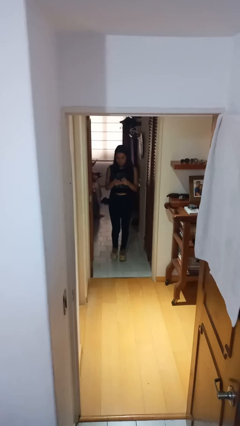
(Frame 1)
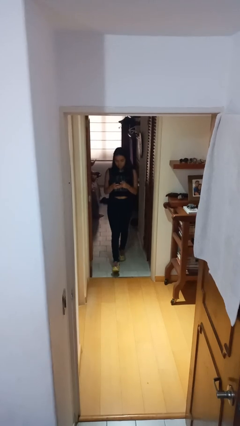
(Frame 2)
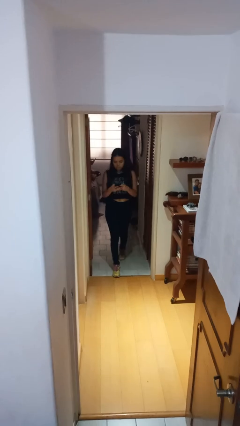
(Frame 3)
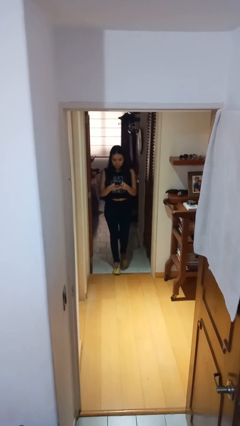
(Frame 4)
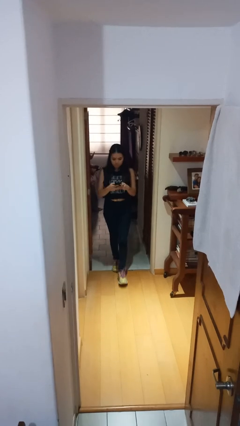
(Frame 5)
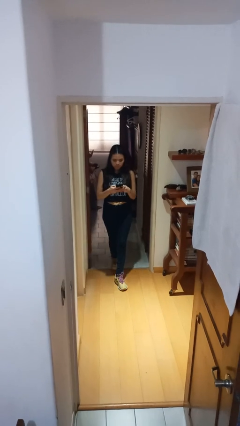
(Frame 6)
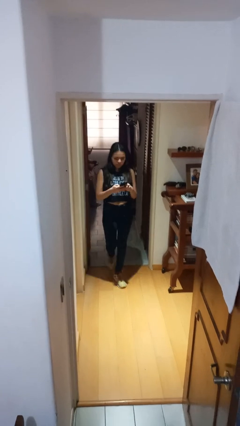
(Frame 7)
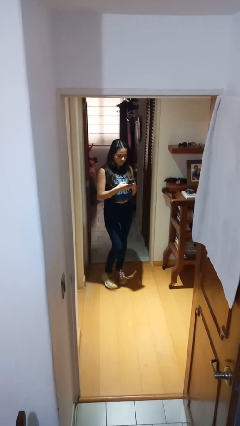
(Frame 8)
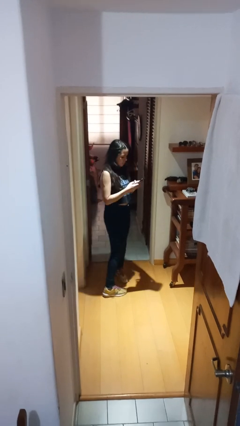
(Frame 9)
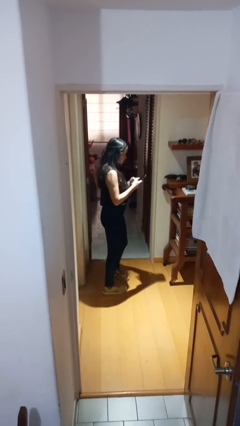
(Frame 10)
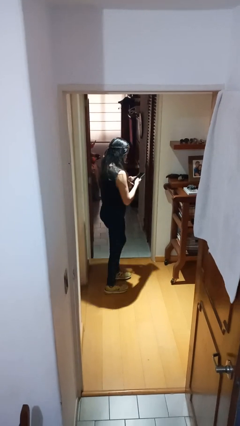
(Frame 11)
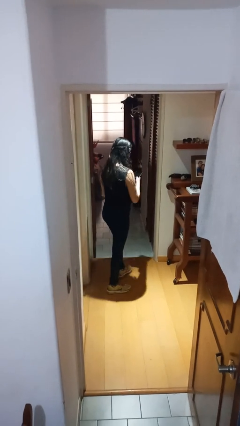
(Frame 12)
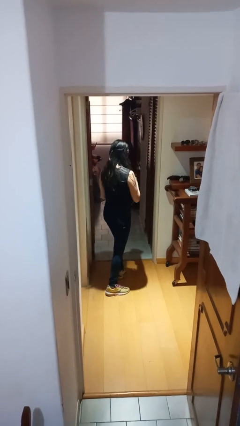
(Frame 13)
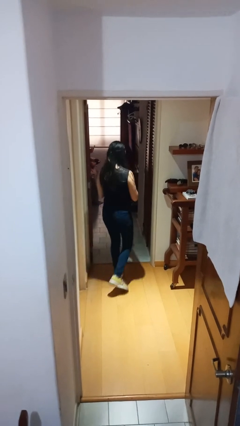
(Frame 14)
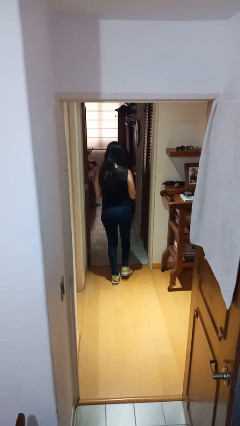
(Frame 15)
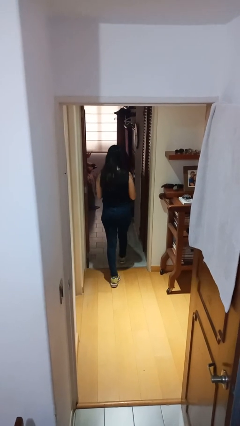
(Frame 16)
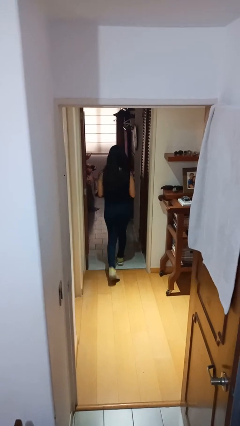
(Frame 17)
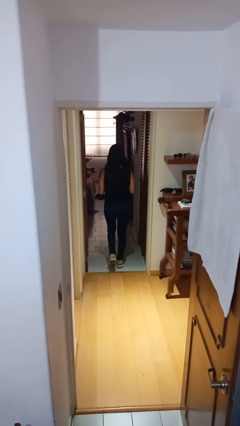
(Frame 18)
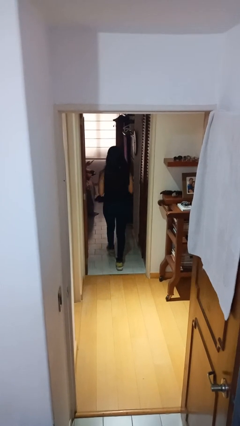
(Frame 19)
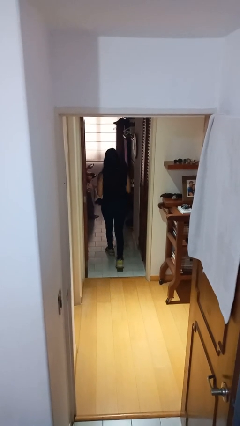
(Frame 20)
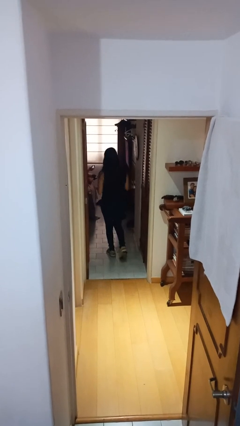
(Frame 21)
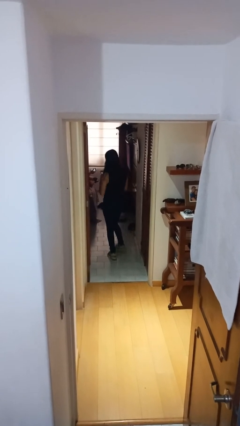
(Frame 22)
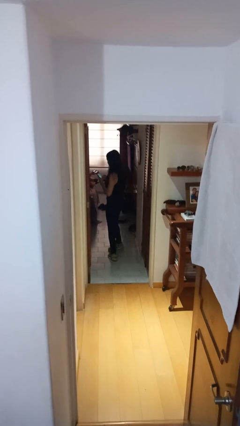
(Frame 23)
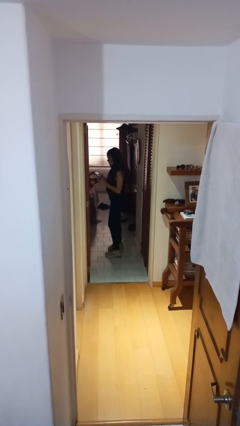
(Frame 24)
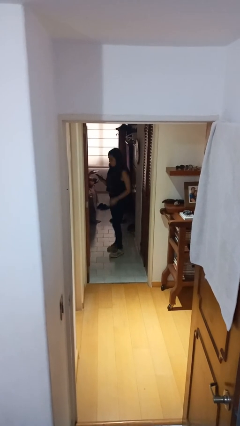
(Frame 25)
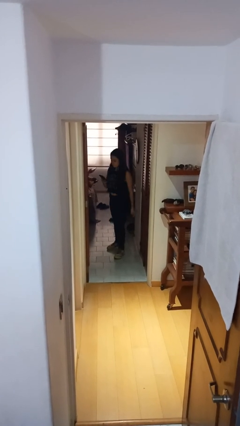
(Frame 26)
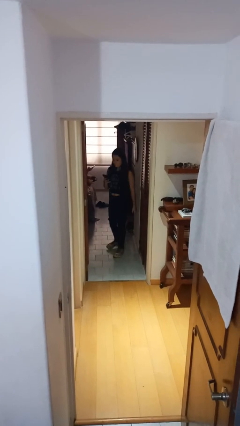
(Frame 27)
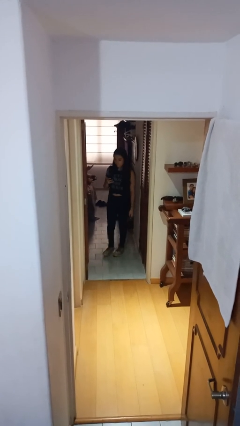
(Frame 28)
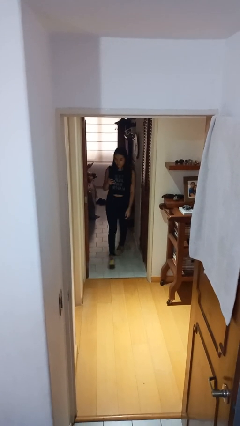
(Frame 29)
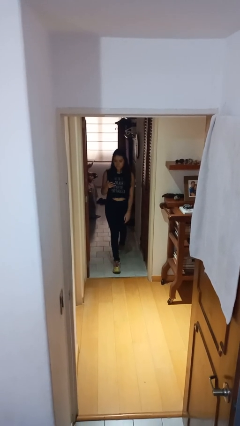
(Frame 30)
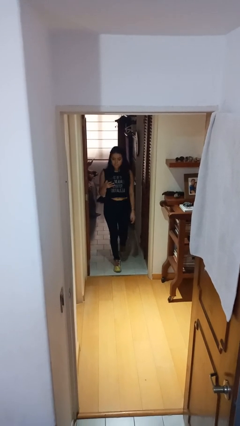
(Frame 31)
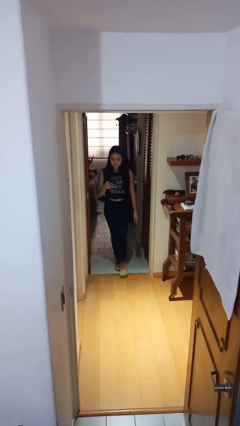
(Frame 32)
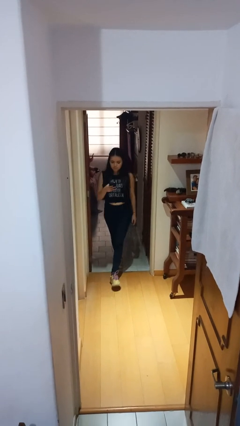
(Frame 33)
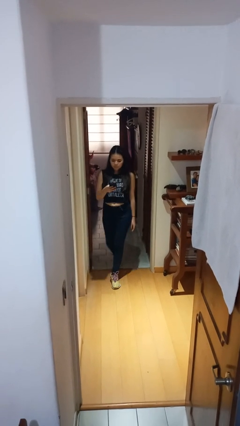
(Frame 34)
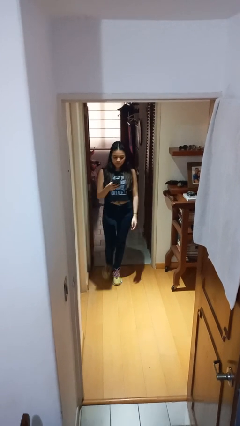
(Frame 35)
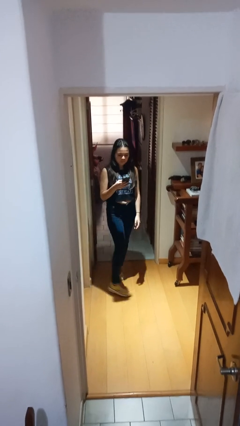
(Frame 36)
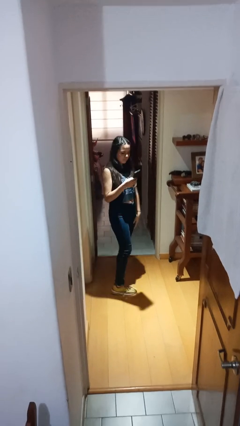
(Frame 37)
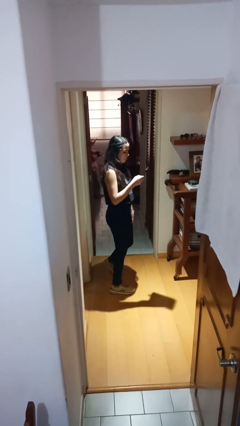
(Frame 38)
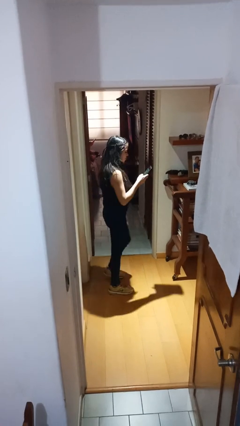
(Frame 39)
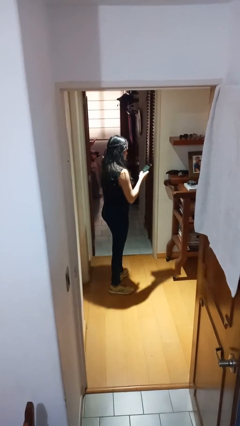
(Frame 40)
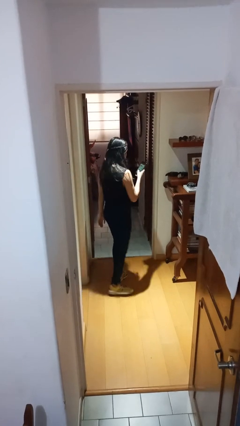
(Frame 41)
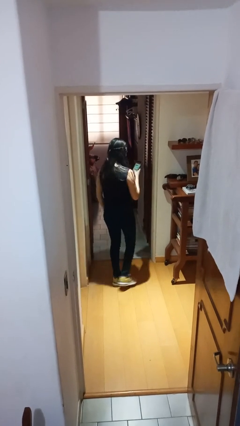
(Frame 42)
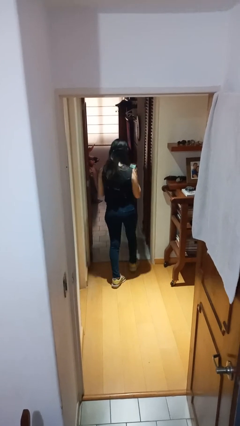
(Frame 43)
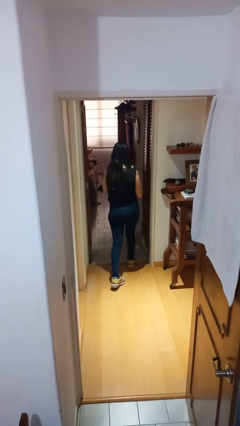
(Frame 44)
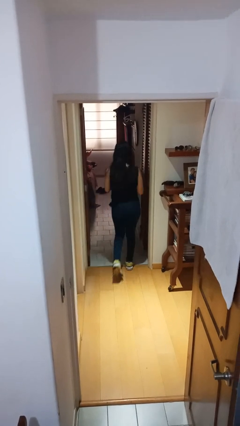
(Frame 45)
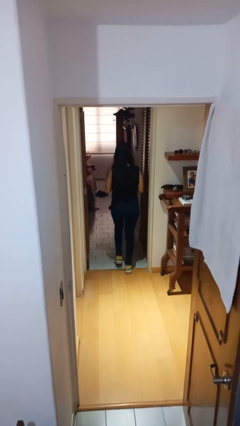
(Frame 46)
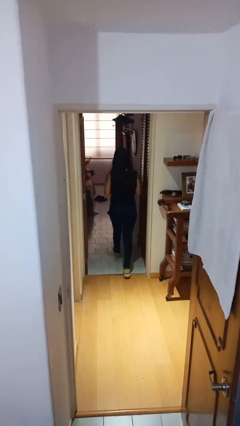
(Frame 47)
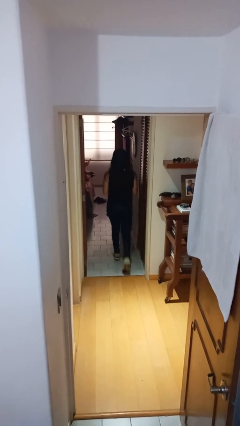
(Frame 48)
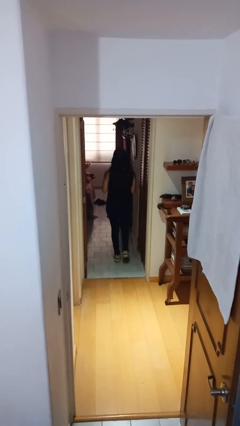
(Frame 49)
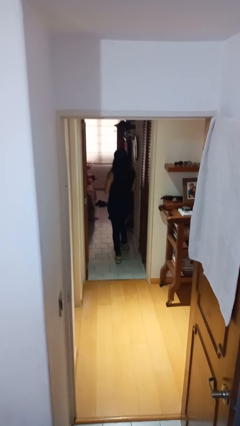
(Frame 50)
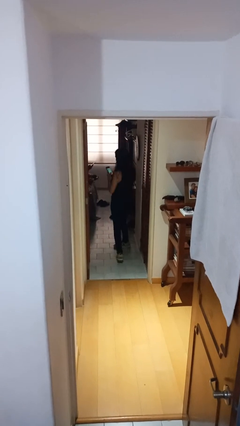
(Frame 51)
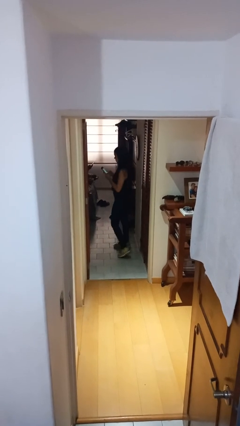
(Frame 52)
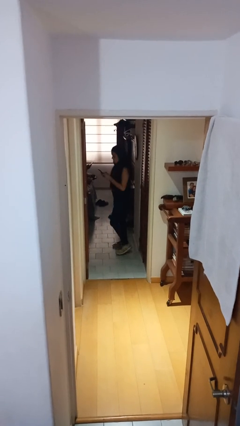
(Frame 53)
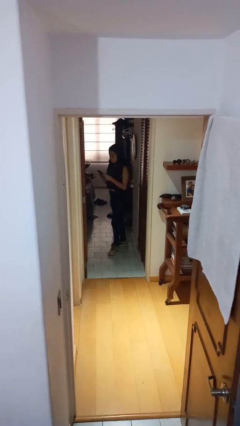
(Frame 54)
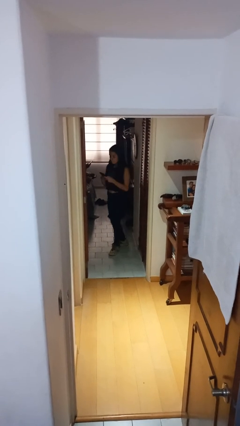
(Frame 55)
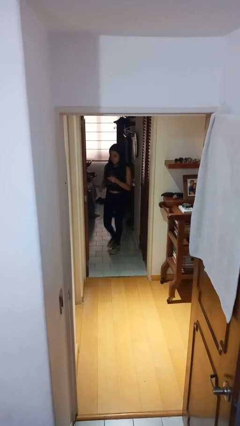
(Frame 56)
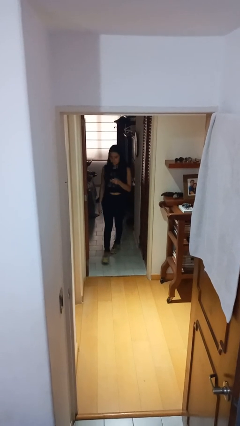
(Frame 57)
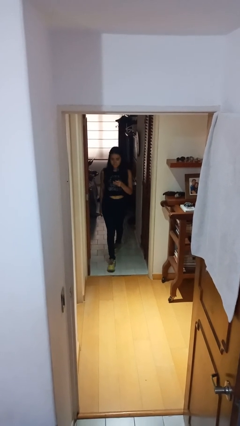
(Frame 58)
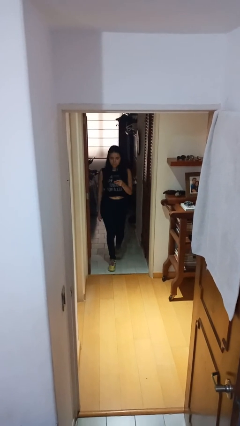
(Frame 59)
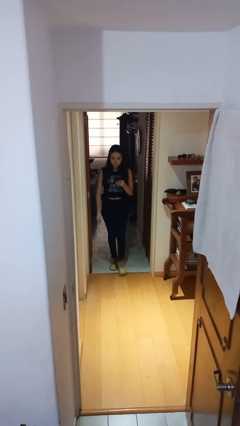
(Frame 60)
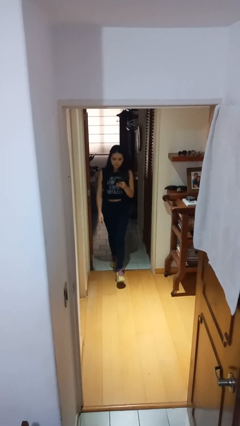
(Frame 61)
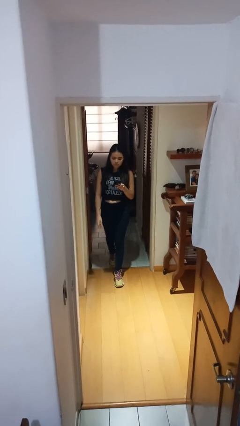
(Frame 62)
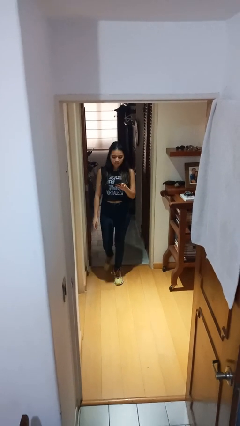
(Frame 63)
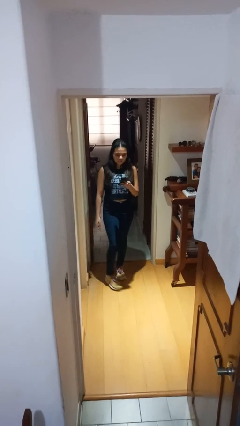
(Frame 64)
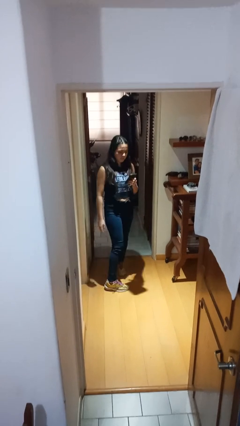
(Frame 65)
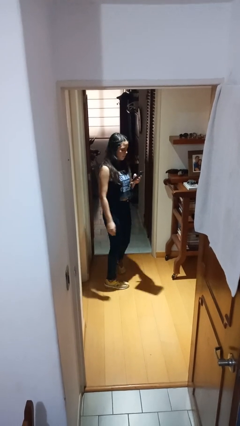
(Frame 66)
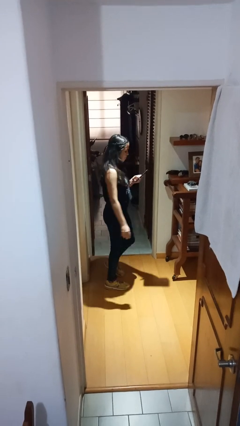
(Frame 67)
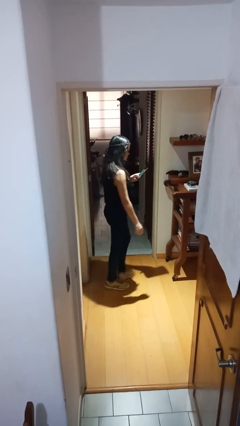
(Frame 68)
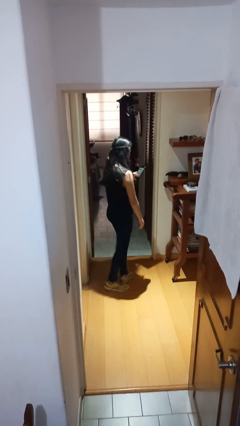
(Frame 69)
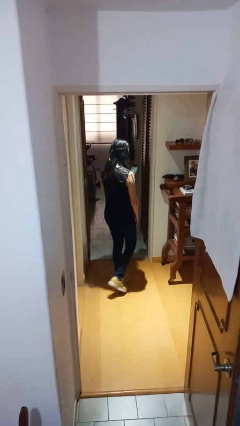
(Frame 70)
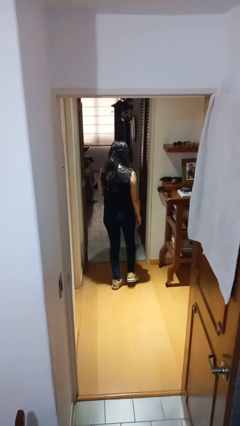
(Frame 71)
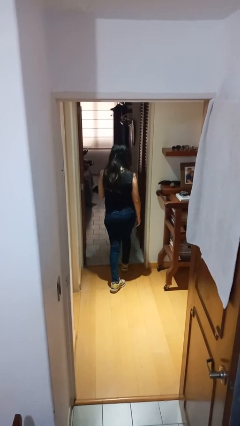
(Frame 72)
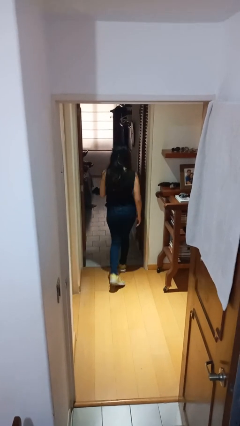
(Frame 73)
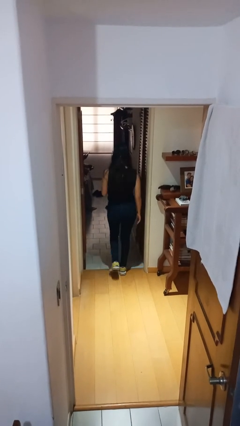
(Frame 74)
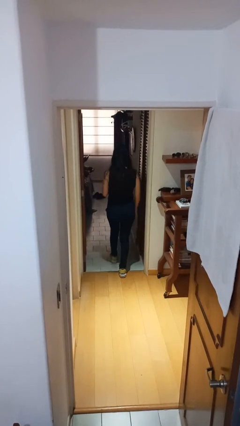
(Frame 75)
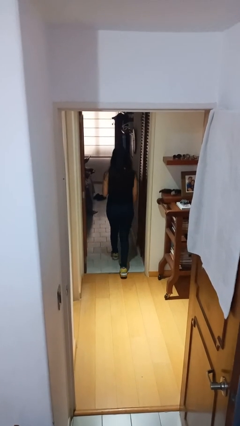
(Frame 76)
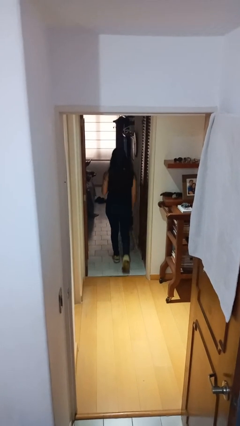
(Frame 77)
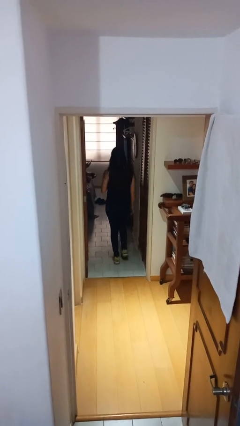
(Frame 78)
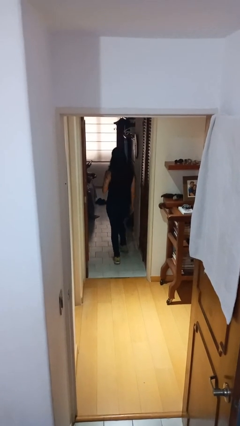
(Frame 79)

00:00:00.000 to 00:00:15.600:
person texts on phone

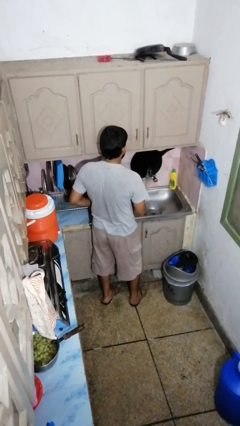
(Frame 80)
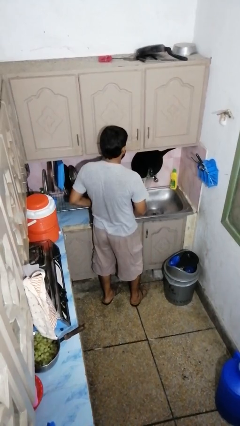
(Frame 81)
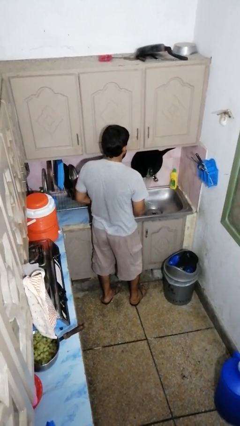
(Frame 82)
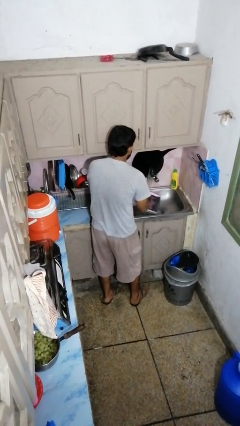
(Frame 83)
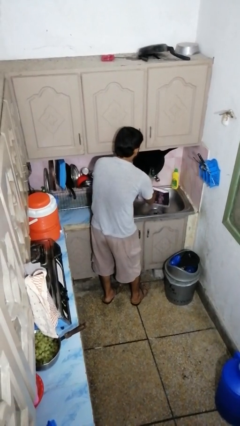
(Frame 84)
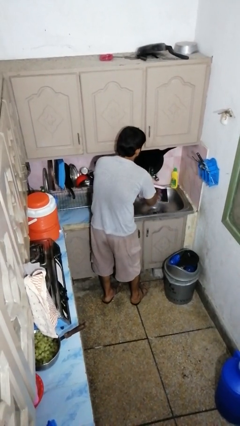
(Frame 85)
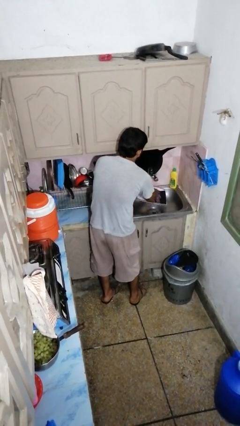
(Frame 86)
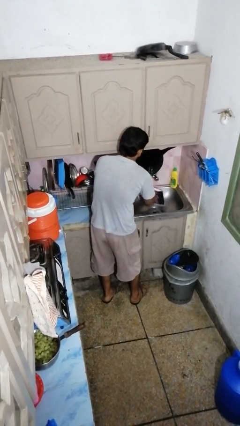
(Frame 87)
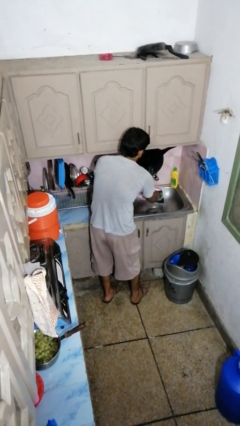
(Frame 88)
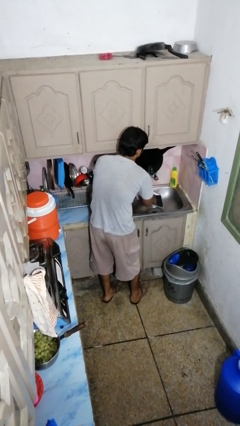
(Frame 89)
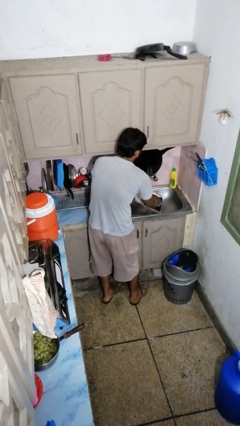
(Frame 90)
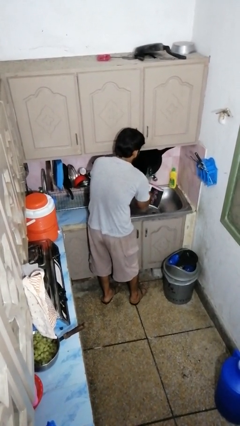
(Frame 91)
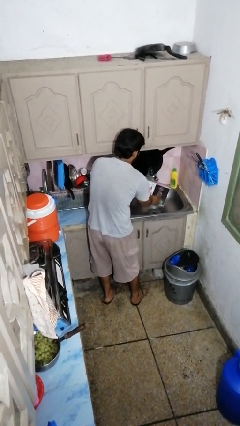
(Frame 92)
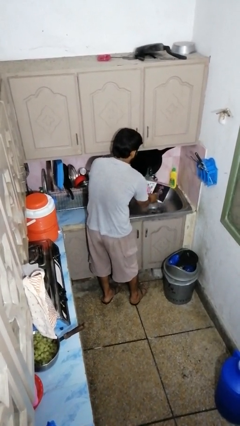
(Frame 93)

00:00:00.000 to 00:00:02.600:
person washes dish

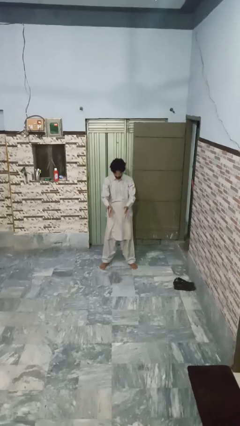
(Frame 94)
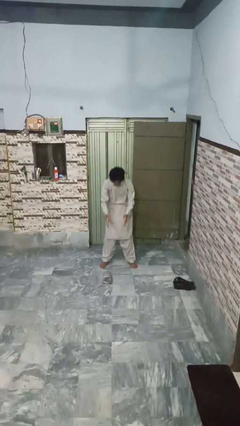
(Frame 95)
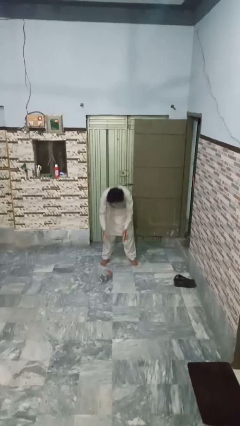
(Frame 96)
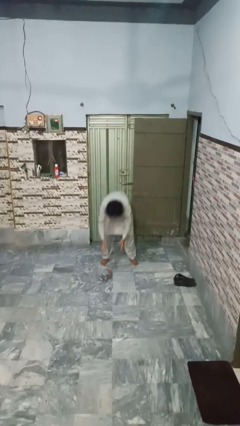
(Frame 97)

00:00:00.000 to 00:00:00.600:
person catches dropped object
